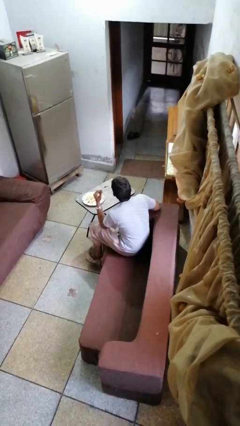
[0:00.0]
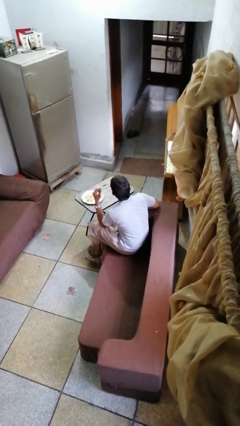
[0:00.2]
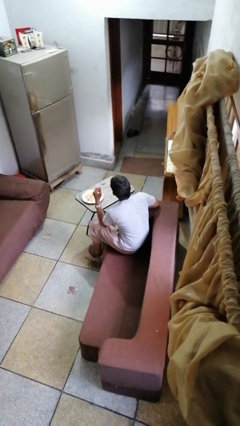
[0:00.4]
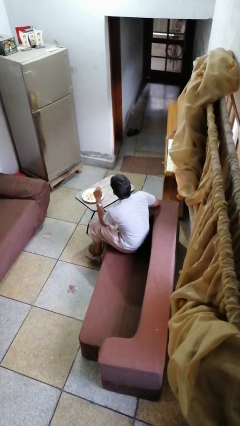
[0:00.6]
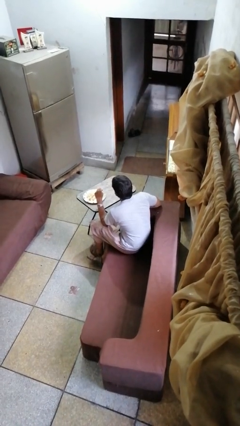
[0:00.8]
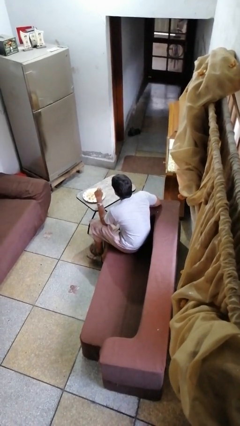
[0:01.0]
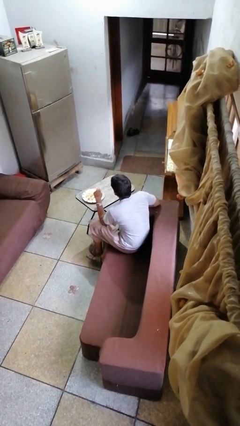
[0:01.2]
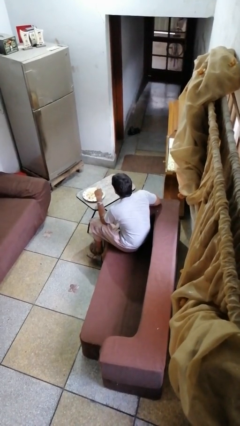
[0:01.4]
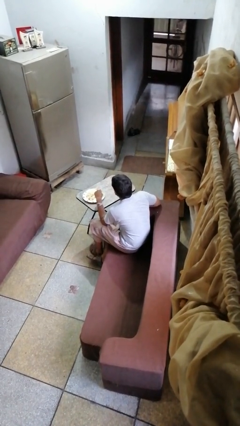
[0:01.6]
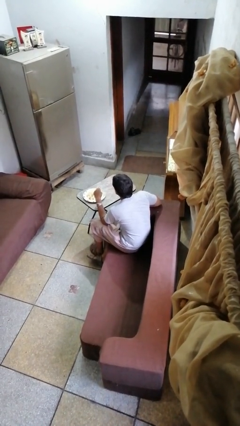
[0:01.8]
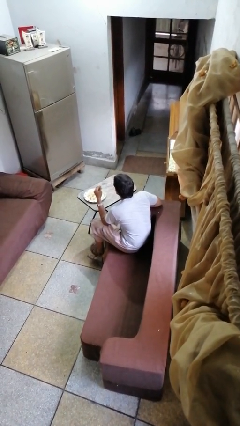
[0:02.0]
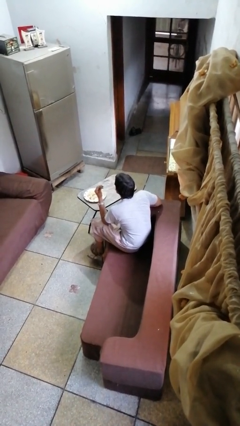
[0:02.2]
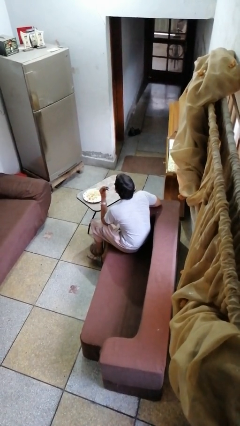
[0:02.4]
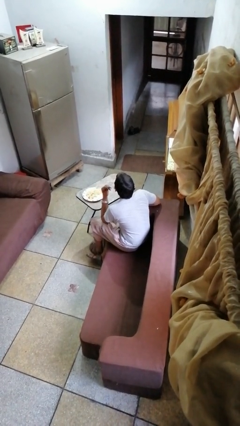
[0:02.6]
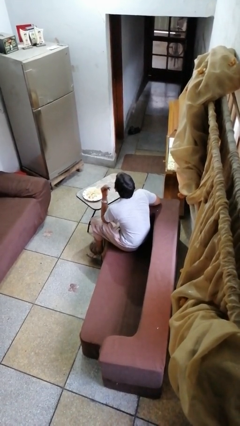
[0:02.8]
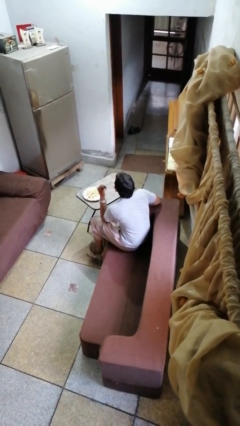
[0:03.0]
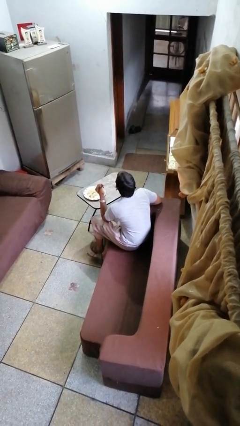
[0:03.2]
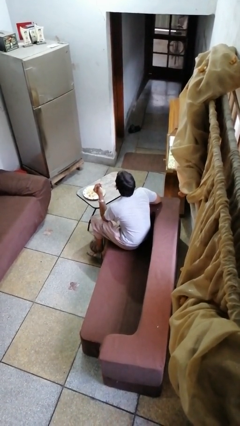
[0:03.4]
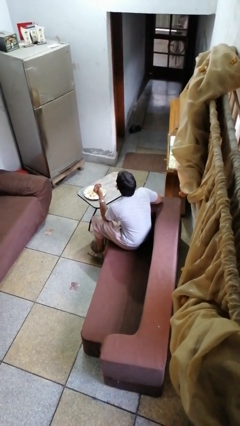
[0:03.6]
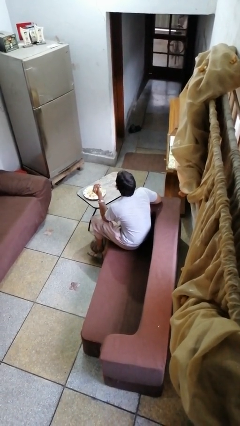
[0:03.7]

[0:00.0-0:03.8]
person eats with utensil

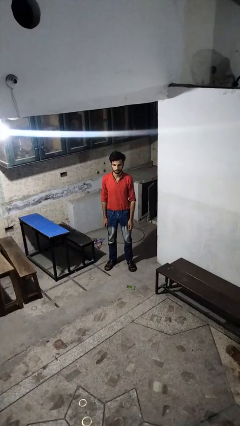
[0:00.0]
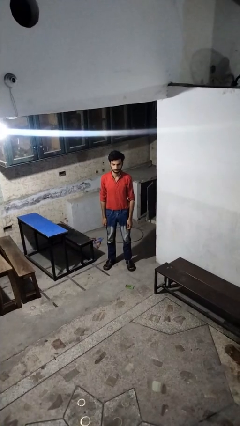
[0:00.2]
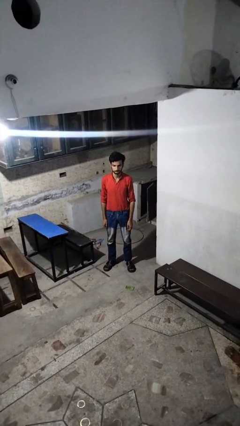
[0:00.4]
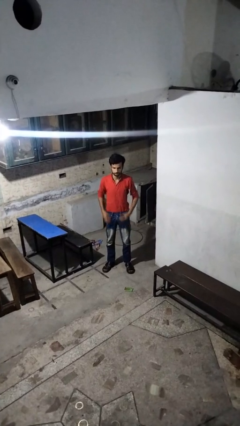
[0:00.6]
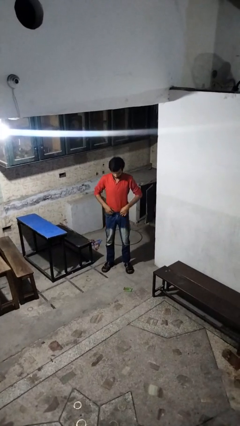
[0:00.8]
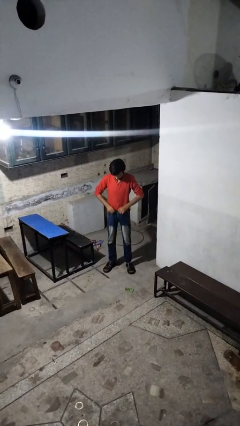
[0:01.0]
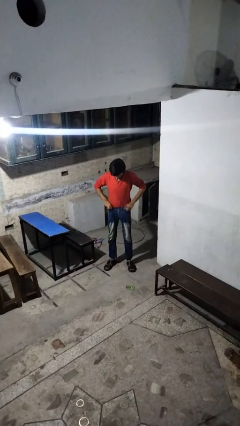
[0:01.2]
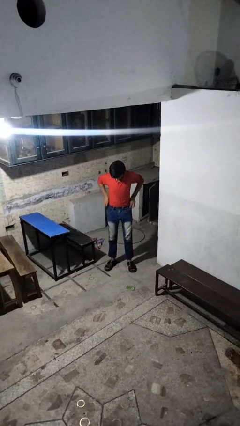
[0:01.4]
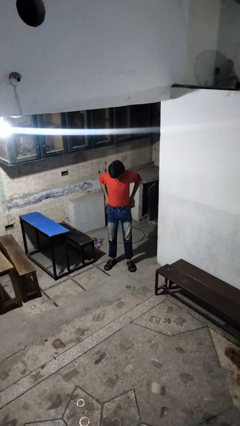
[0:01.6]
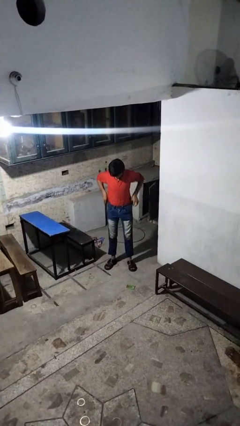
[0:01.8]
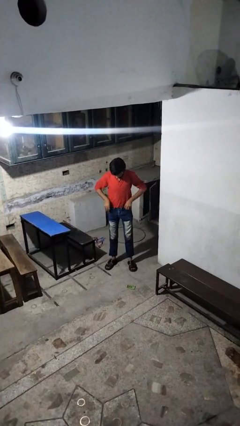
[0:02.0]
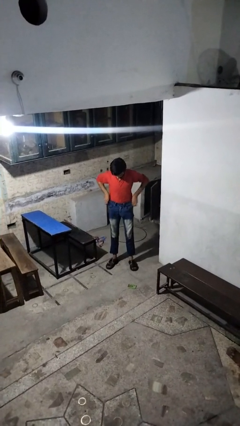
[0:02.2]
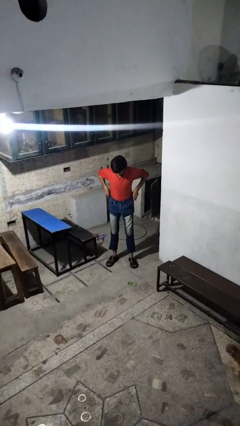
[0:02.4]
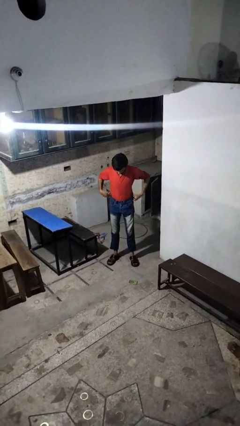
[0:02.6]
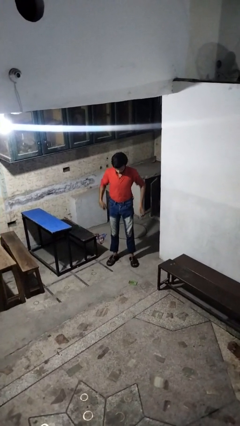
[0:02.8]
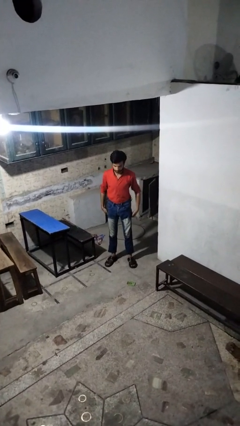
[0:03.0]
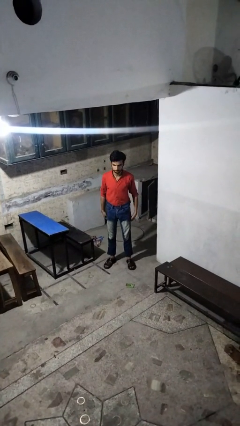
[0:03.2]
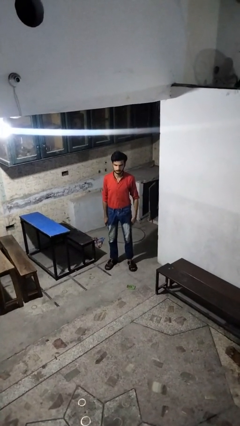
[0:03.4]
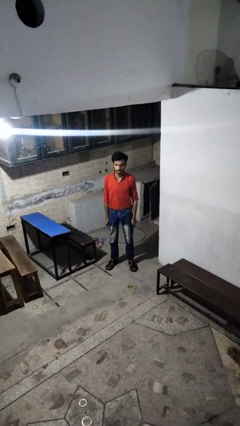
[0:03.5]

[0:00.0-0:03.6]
person hikes up pants

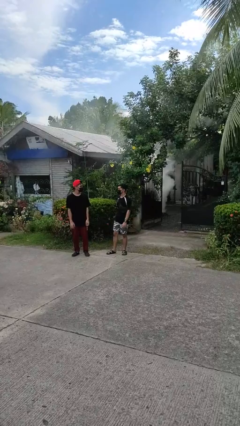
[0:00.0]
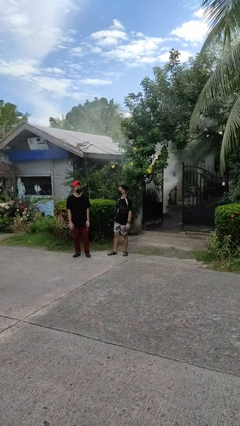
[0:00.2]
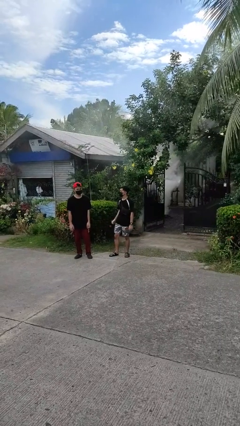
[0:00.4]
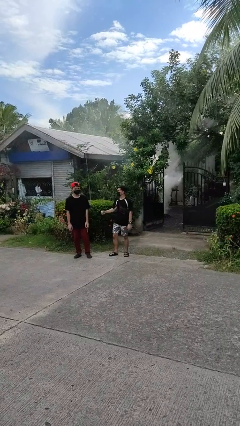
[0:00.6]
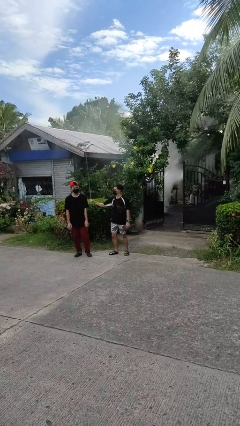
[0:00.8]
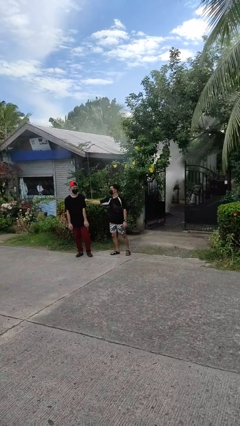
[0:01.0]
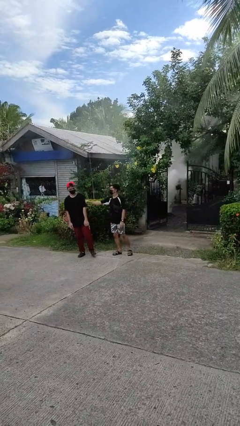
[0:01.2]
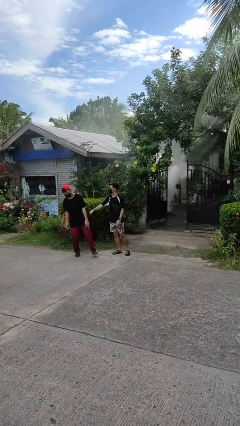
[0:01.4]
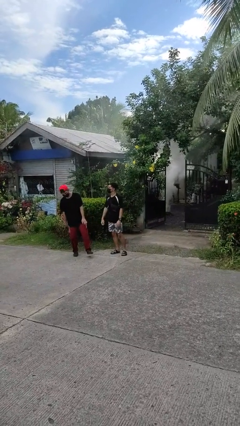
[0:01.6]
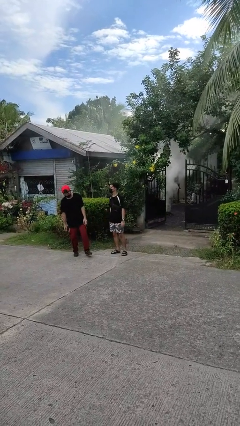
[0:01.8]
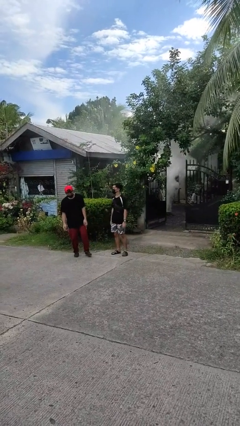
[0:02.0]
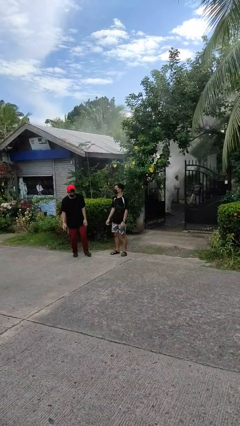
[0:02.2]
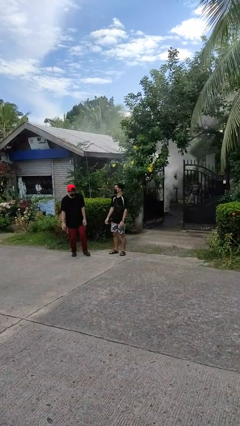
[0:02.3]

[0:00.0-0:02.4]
person pounds shoulders of person

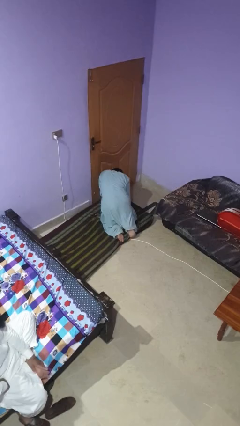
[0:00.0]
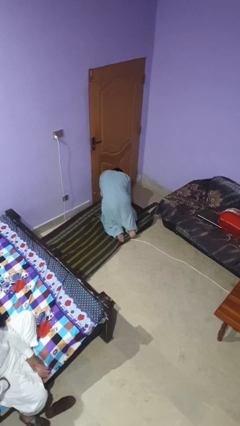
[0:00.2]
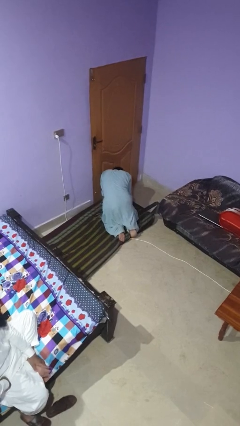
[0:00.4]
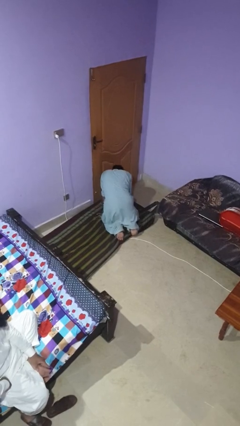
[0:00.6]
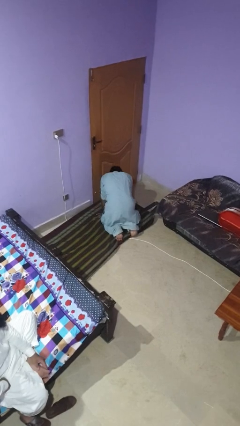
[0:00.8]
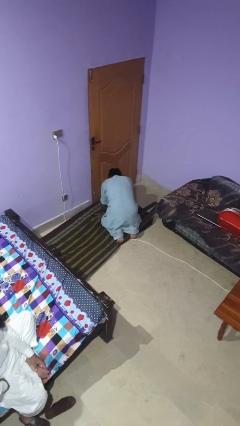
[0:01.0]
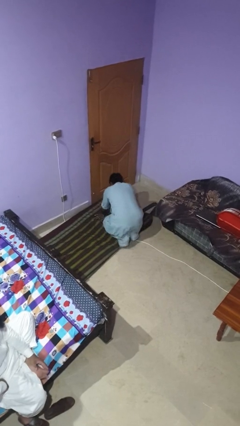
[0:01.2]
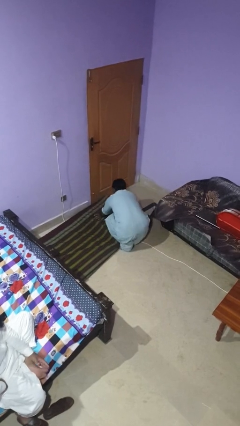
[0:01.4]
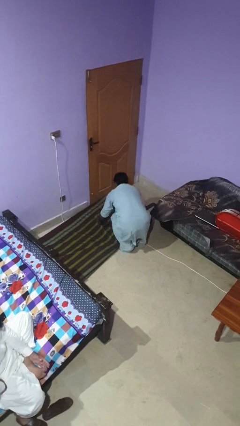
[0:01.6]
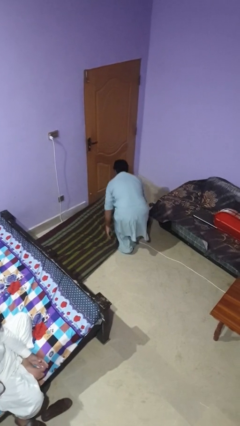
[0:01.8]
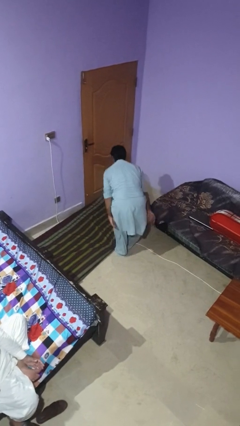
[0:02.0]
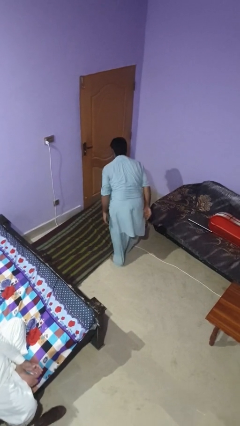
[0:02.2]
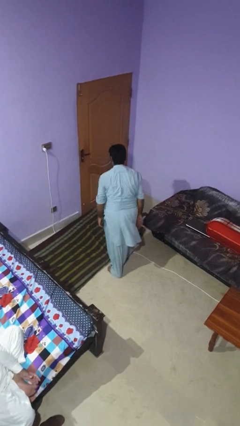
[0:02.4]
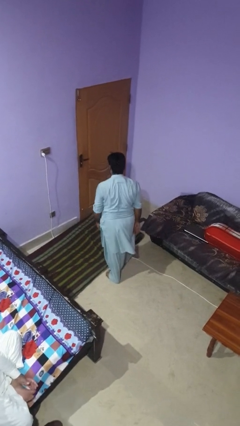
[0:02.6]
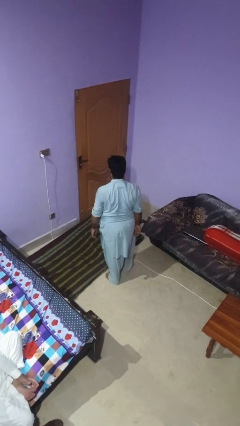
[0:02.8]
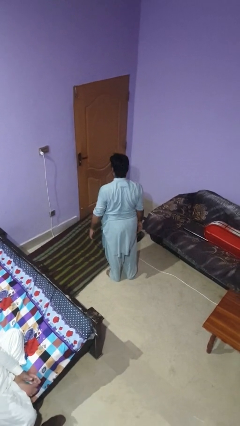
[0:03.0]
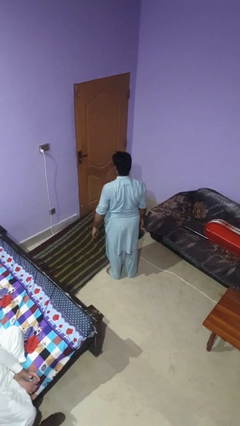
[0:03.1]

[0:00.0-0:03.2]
person stands up from floor

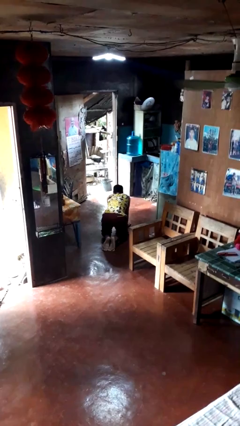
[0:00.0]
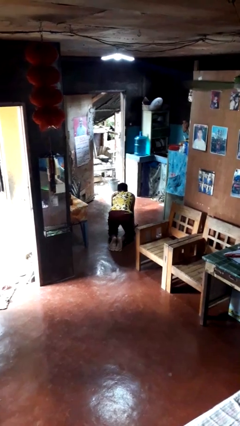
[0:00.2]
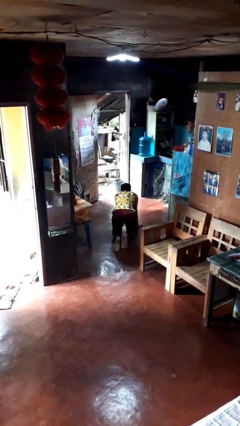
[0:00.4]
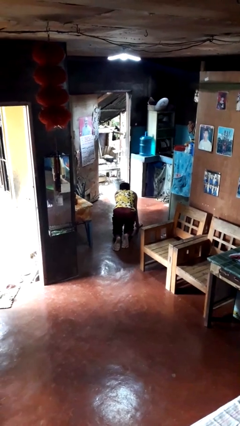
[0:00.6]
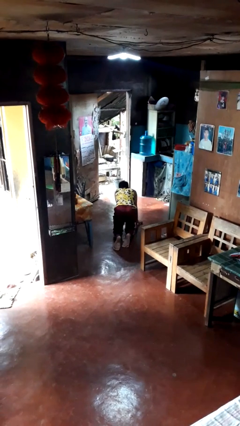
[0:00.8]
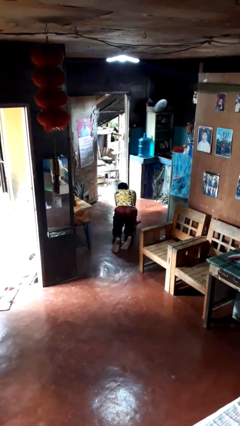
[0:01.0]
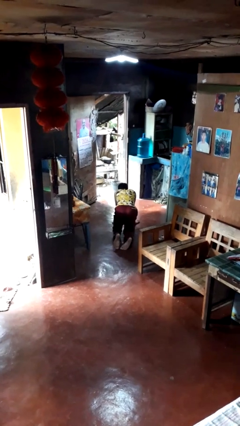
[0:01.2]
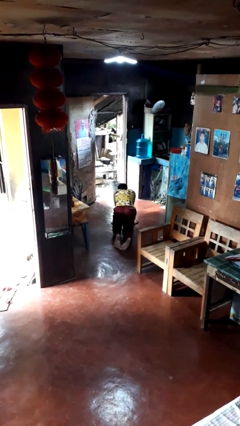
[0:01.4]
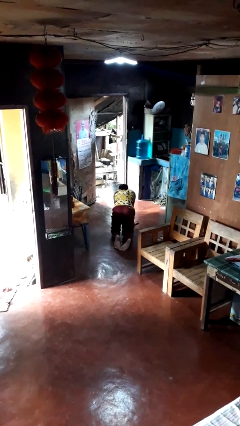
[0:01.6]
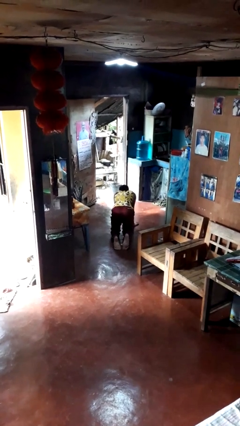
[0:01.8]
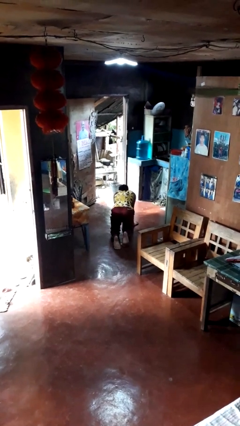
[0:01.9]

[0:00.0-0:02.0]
person crawls

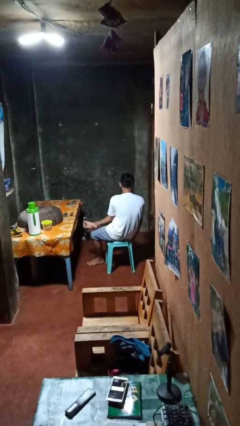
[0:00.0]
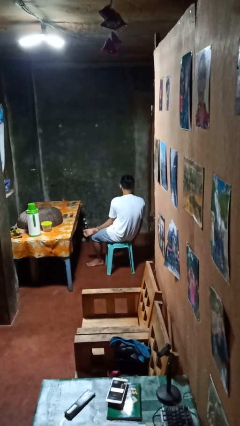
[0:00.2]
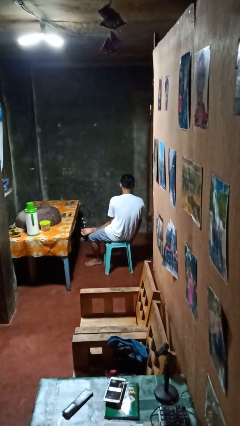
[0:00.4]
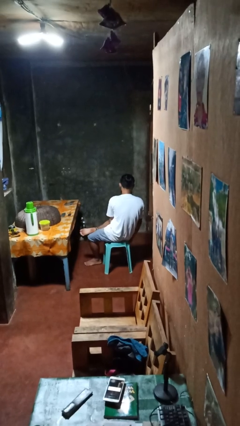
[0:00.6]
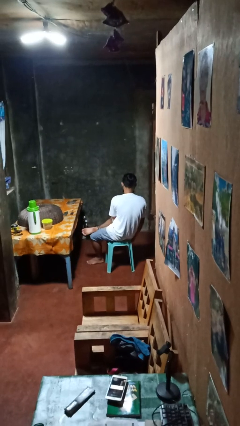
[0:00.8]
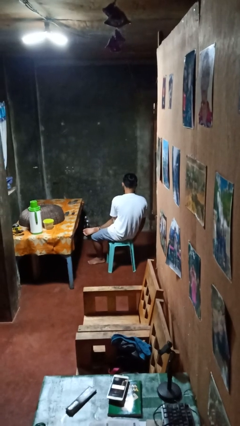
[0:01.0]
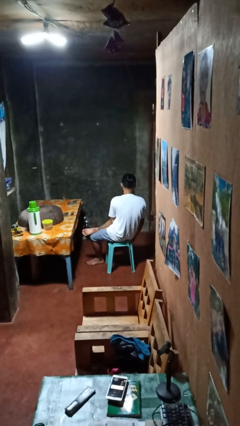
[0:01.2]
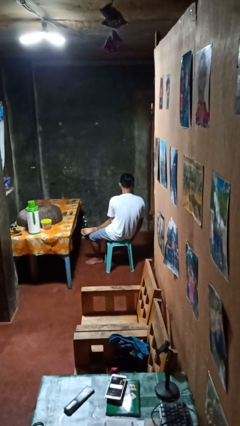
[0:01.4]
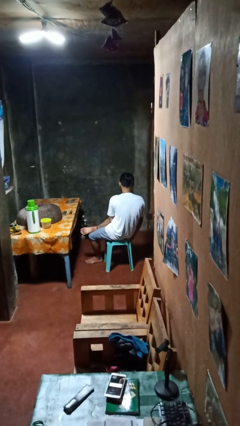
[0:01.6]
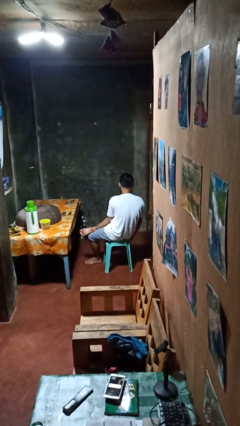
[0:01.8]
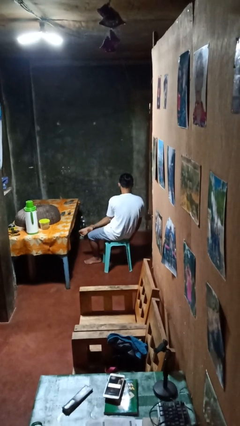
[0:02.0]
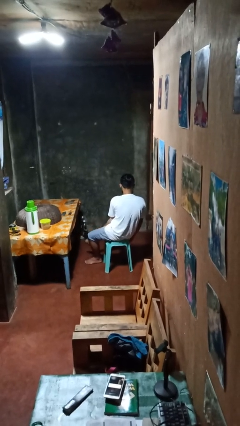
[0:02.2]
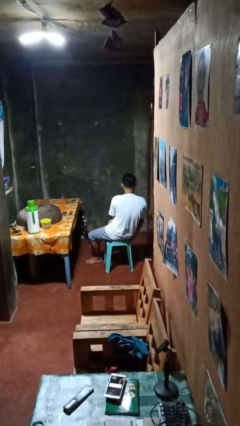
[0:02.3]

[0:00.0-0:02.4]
person crosses legs

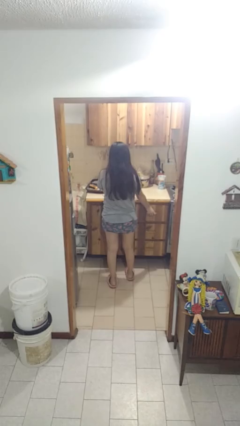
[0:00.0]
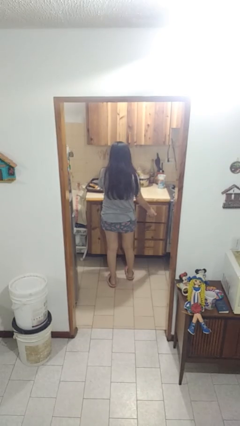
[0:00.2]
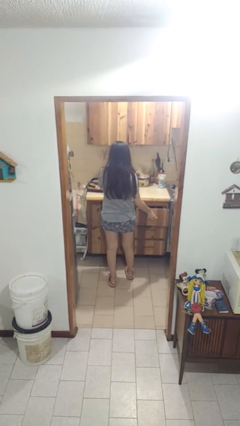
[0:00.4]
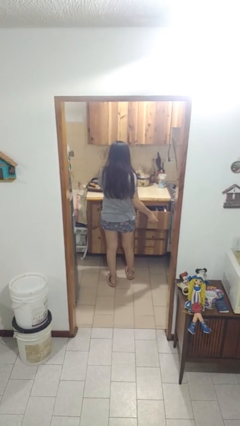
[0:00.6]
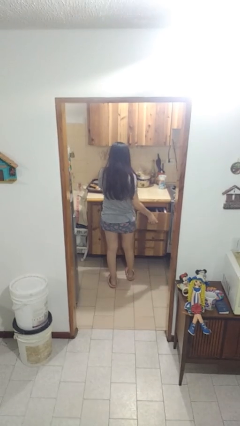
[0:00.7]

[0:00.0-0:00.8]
person opens kitchen drawer
